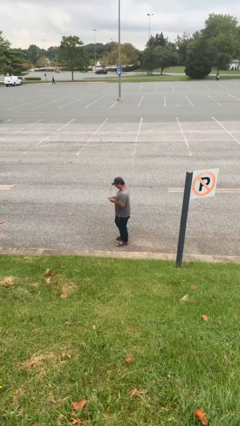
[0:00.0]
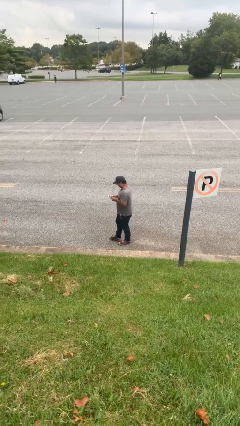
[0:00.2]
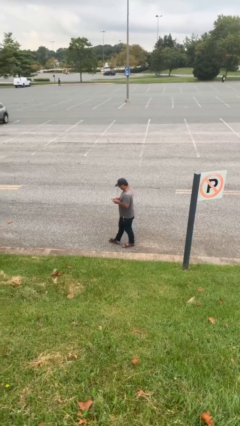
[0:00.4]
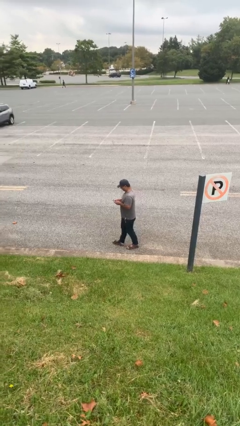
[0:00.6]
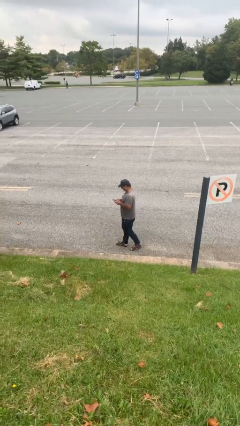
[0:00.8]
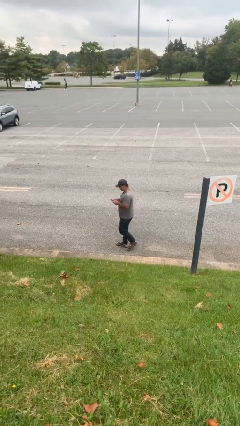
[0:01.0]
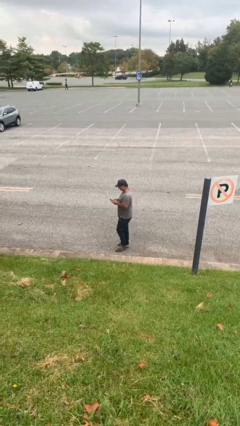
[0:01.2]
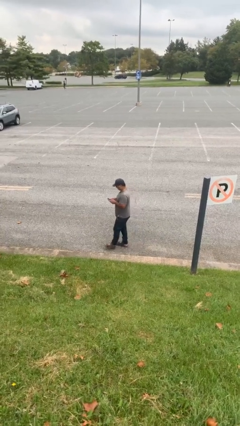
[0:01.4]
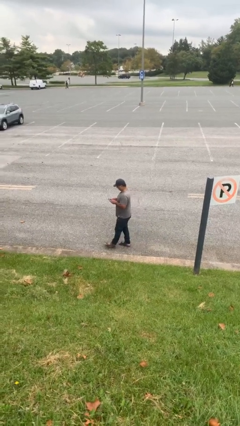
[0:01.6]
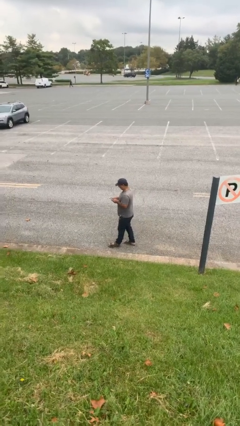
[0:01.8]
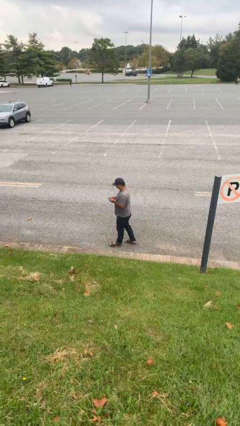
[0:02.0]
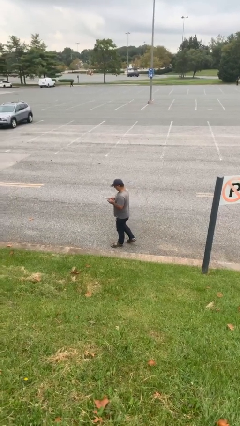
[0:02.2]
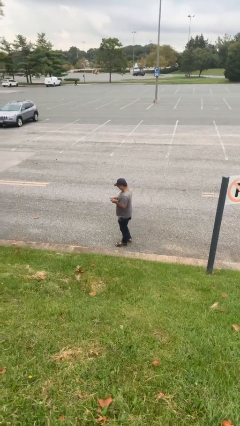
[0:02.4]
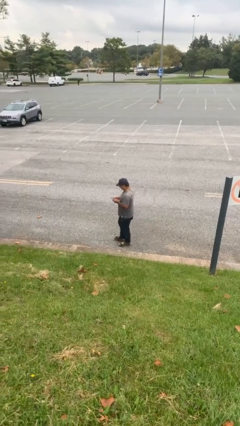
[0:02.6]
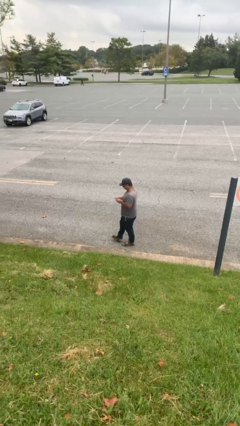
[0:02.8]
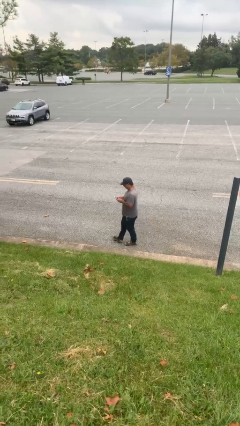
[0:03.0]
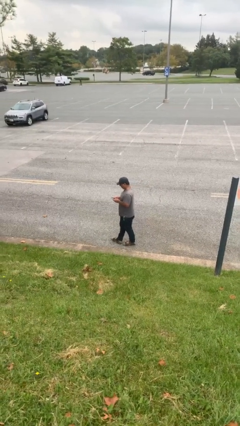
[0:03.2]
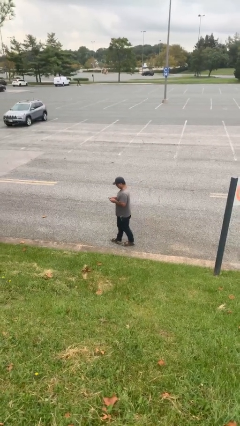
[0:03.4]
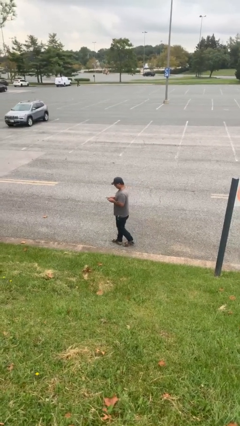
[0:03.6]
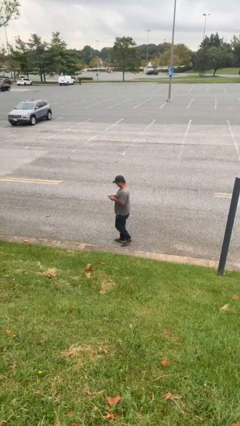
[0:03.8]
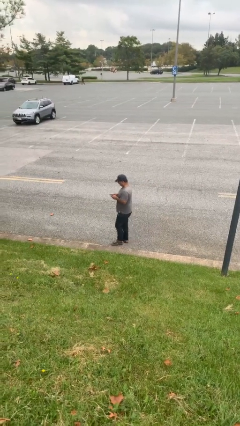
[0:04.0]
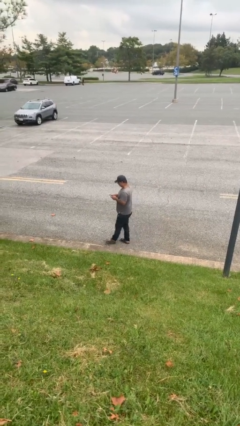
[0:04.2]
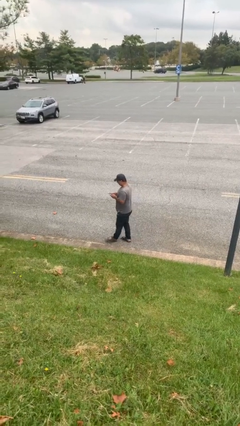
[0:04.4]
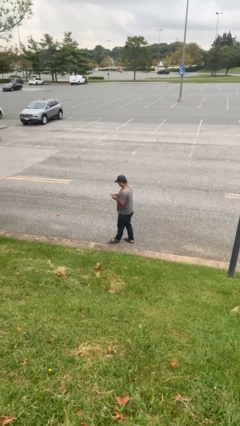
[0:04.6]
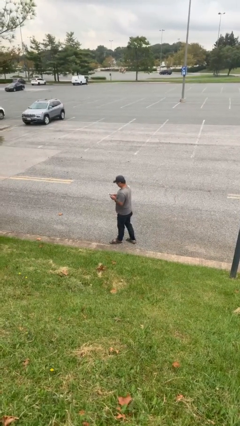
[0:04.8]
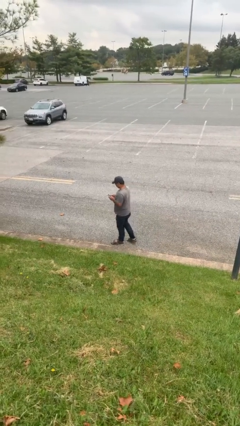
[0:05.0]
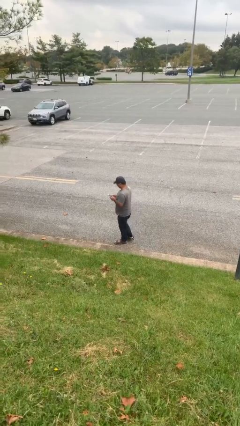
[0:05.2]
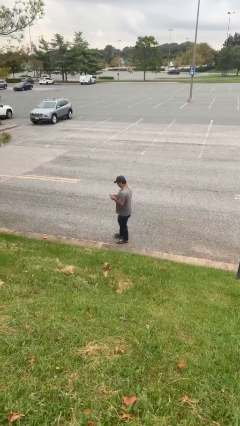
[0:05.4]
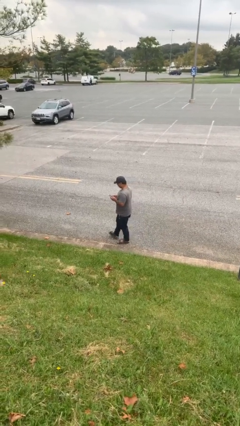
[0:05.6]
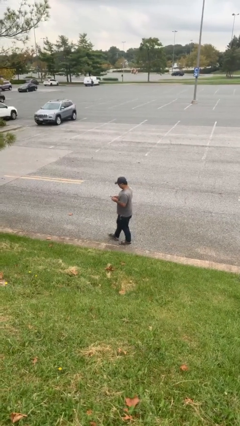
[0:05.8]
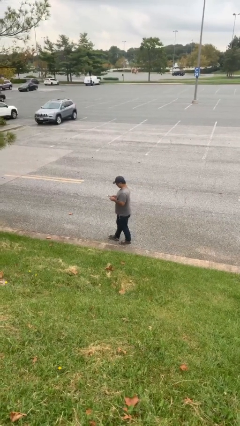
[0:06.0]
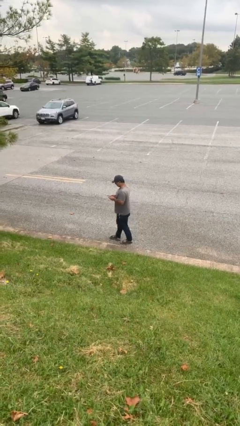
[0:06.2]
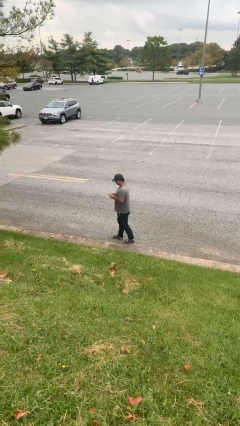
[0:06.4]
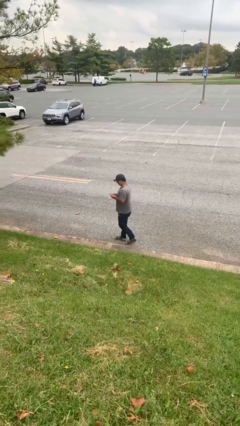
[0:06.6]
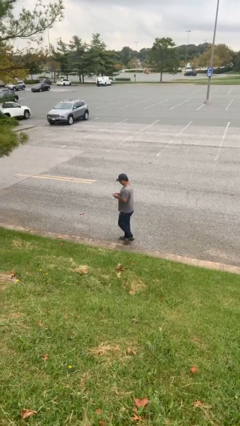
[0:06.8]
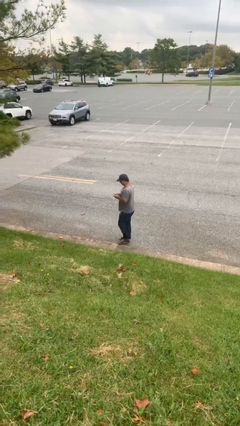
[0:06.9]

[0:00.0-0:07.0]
person texts on phone

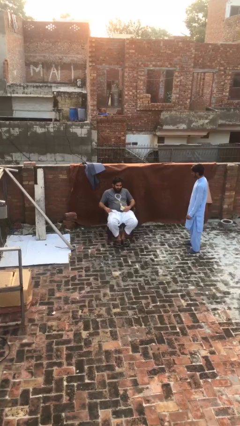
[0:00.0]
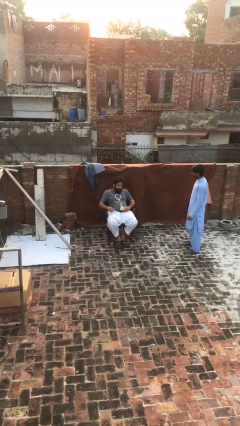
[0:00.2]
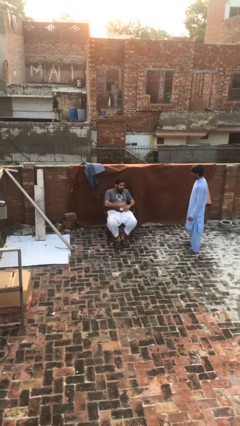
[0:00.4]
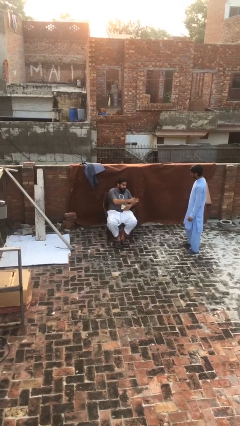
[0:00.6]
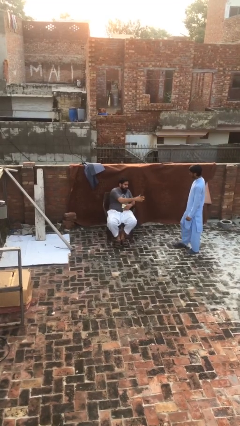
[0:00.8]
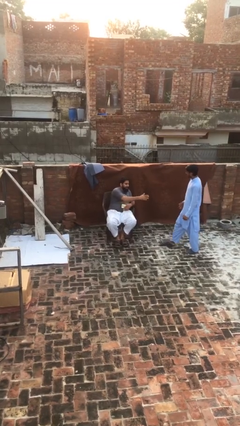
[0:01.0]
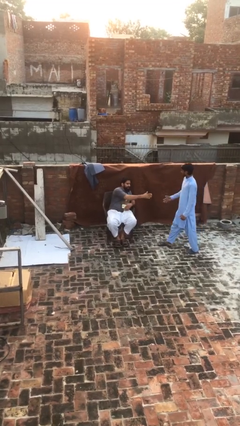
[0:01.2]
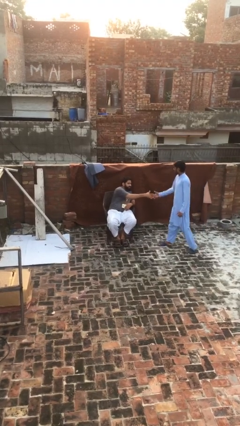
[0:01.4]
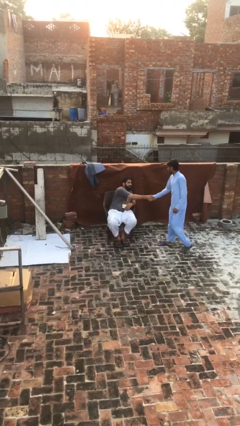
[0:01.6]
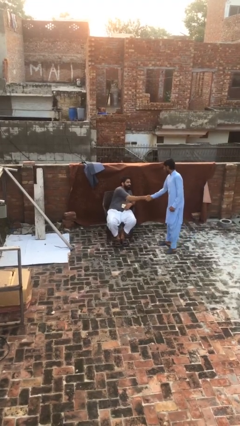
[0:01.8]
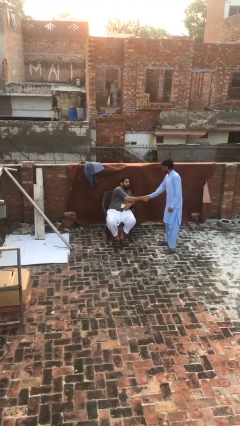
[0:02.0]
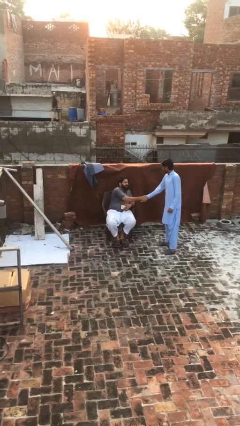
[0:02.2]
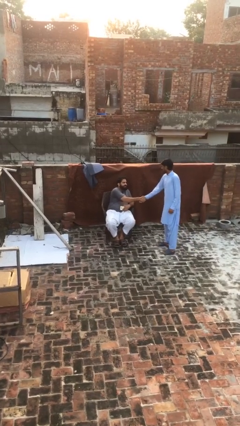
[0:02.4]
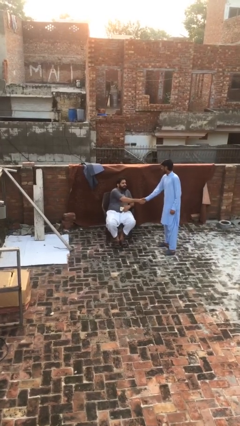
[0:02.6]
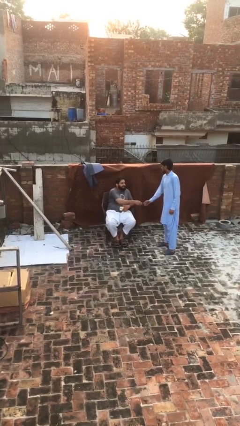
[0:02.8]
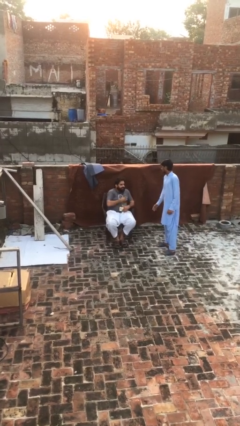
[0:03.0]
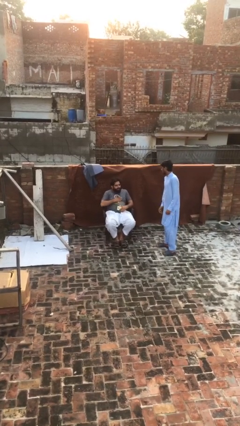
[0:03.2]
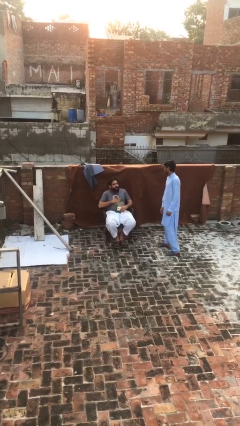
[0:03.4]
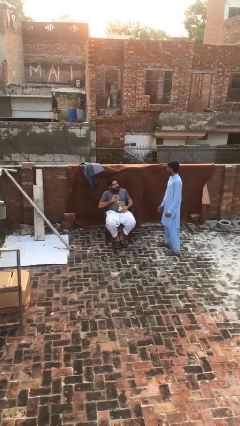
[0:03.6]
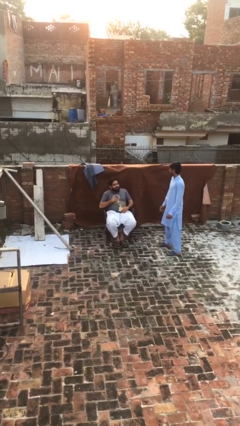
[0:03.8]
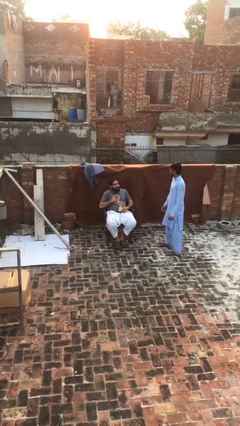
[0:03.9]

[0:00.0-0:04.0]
person shakes hand

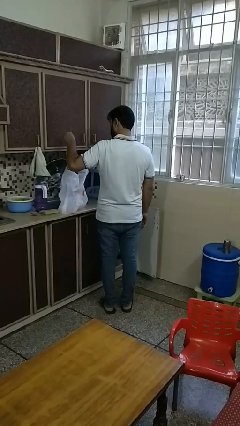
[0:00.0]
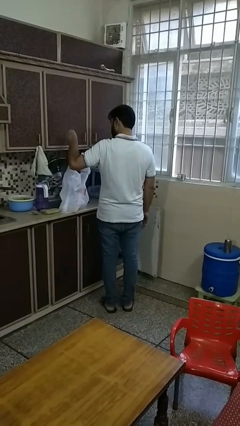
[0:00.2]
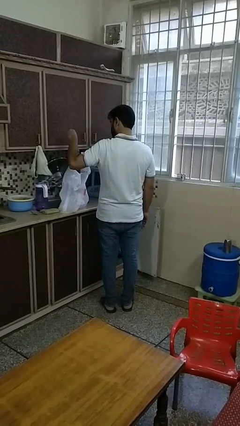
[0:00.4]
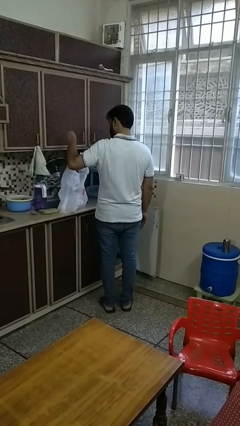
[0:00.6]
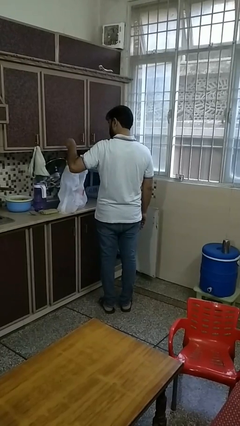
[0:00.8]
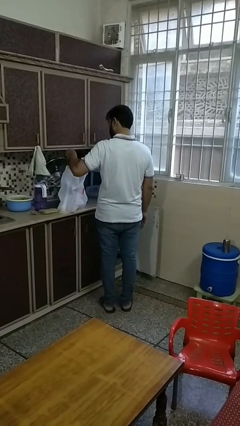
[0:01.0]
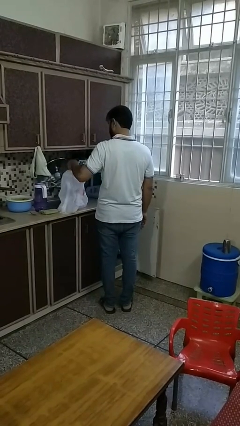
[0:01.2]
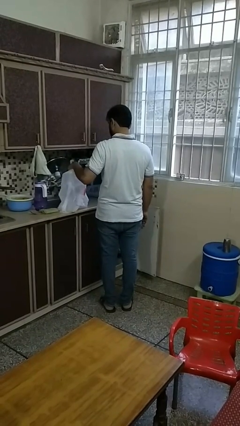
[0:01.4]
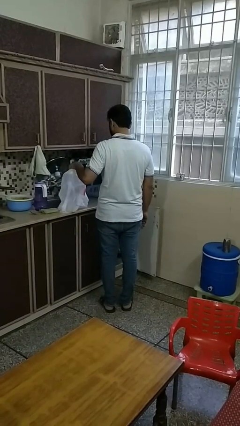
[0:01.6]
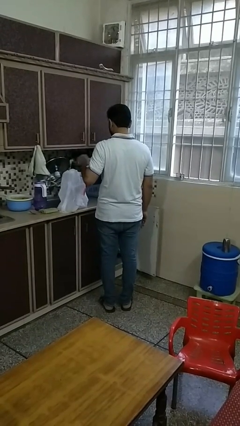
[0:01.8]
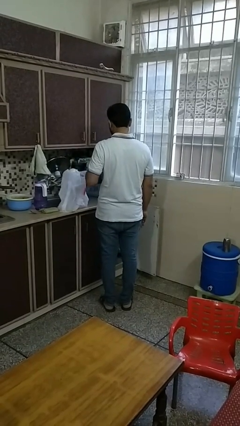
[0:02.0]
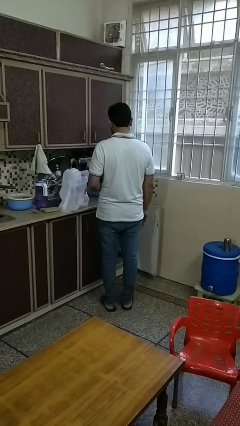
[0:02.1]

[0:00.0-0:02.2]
person puts object into bag

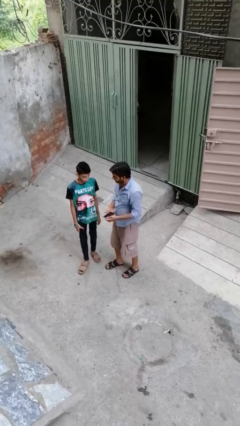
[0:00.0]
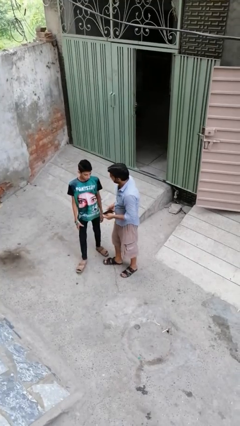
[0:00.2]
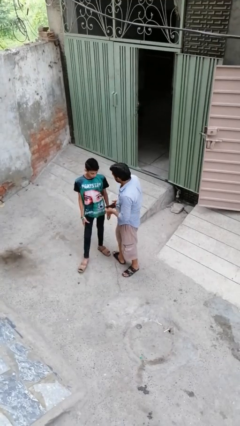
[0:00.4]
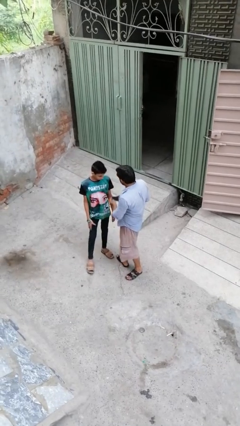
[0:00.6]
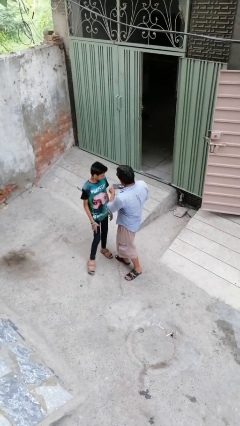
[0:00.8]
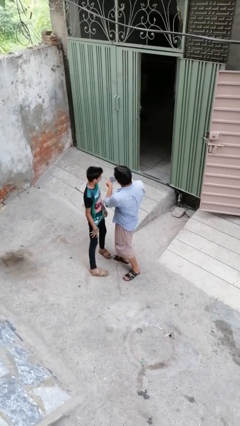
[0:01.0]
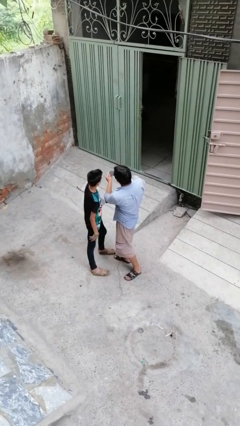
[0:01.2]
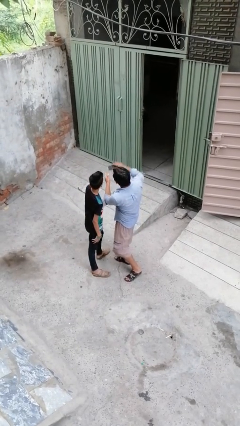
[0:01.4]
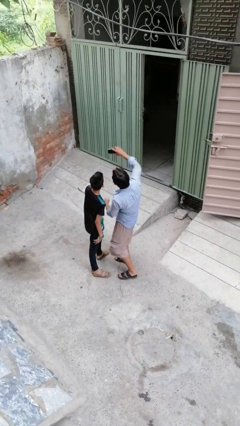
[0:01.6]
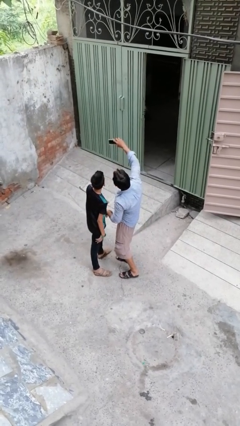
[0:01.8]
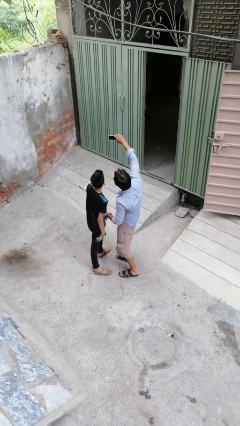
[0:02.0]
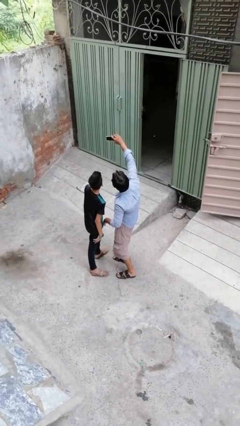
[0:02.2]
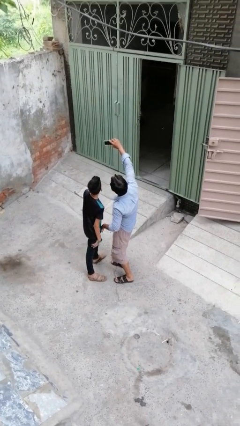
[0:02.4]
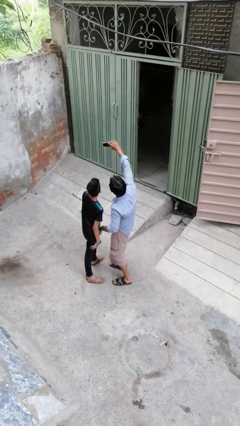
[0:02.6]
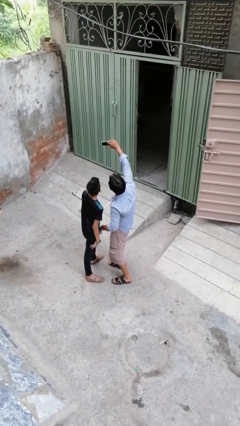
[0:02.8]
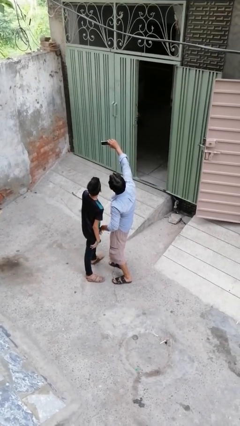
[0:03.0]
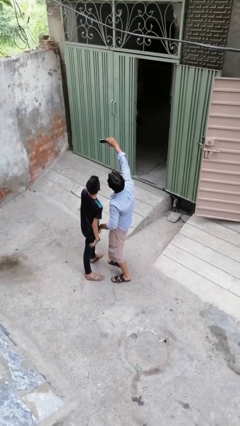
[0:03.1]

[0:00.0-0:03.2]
person takes selfie with person

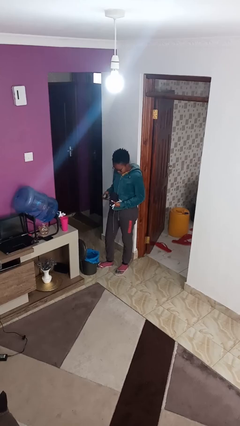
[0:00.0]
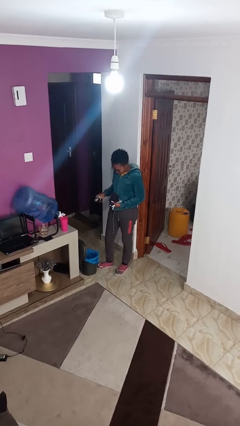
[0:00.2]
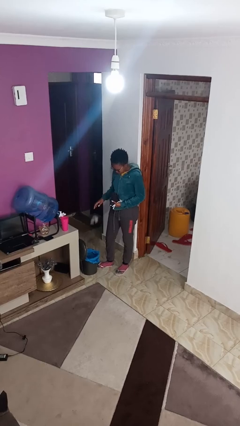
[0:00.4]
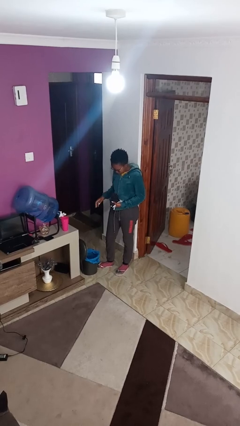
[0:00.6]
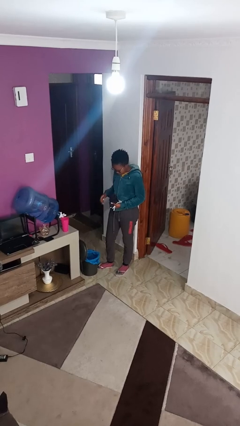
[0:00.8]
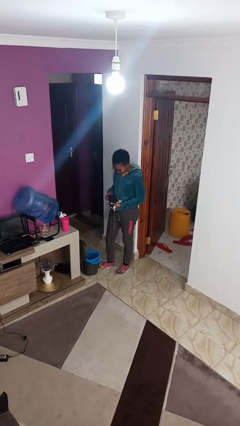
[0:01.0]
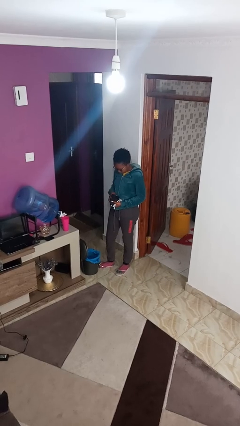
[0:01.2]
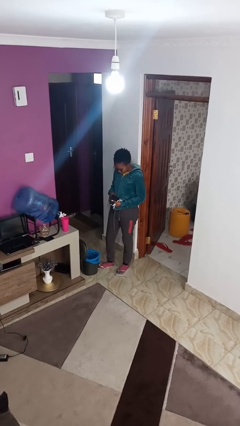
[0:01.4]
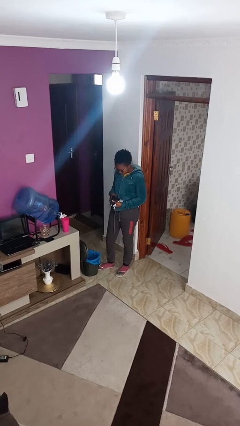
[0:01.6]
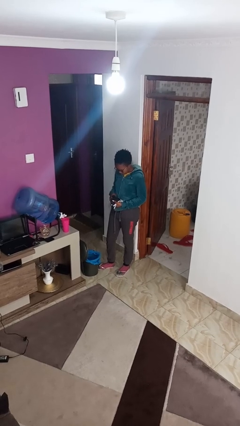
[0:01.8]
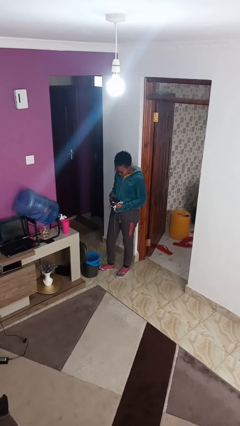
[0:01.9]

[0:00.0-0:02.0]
person discards trash
